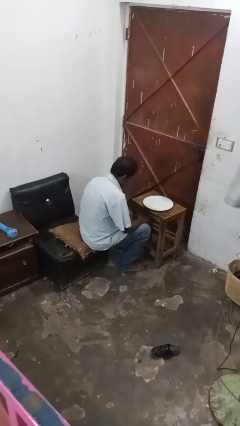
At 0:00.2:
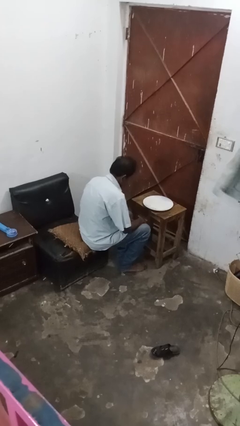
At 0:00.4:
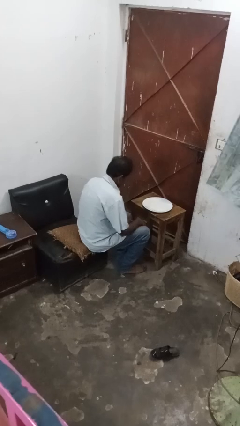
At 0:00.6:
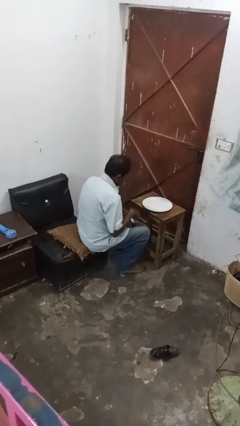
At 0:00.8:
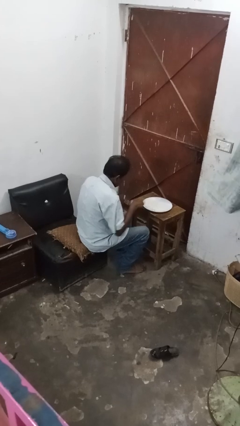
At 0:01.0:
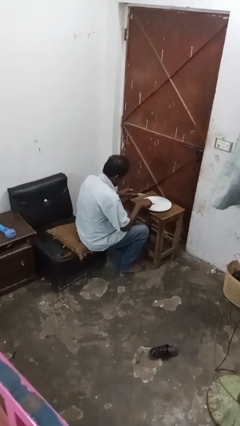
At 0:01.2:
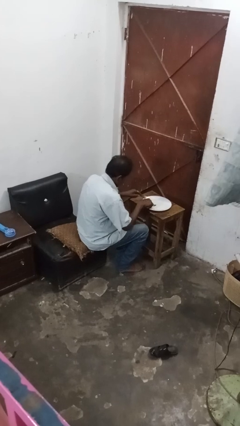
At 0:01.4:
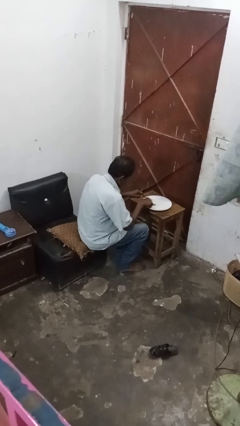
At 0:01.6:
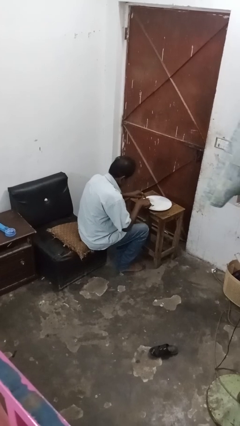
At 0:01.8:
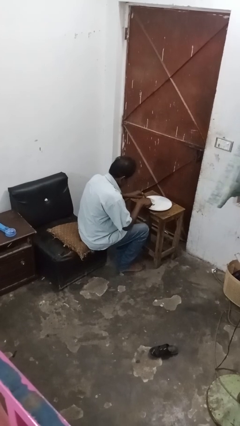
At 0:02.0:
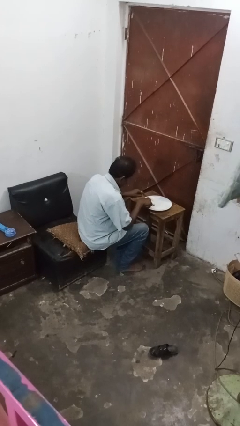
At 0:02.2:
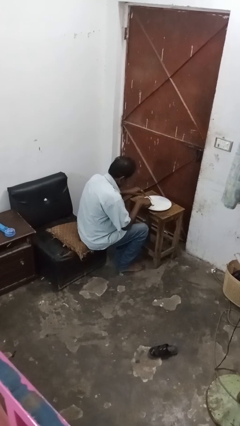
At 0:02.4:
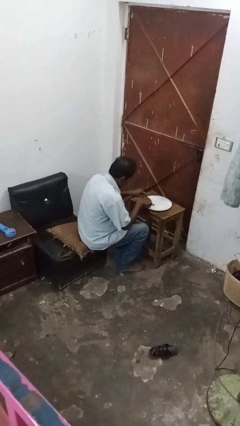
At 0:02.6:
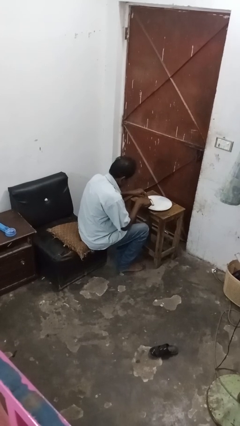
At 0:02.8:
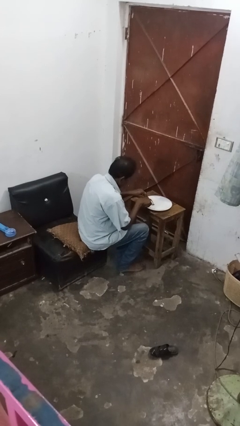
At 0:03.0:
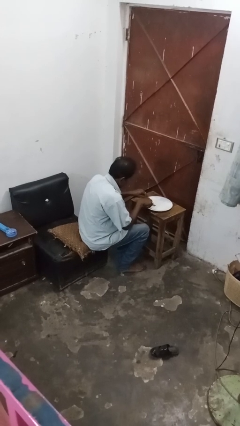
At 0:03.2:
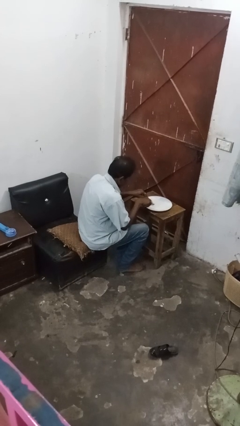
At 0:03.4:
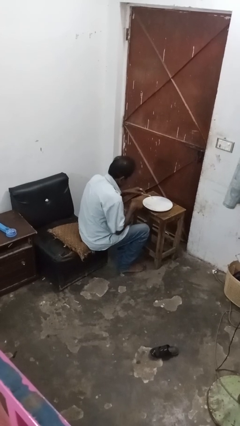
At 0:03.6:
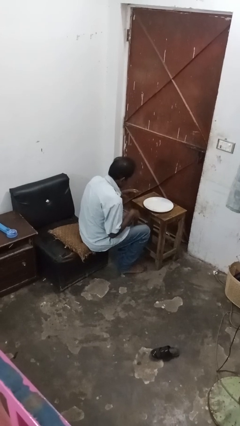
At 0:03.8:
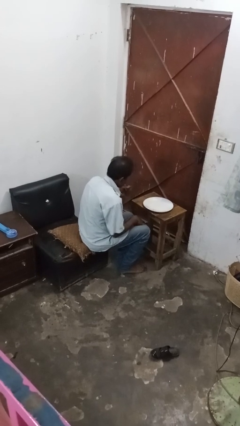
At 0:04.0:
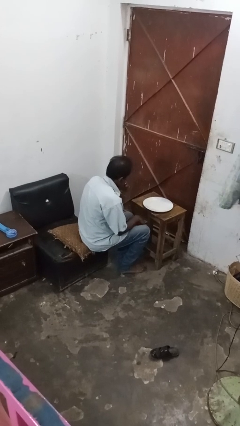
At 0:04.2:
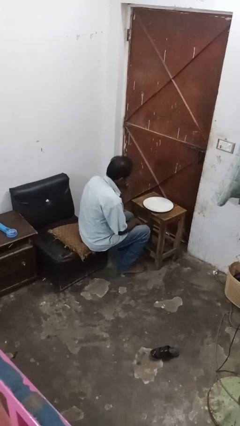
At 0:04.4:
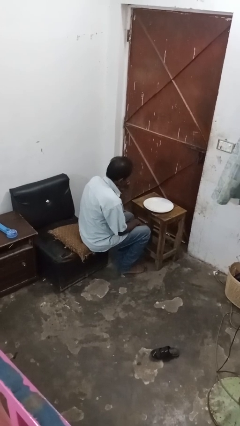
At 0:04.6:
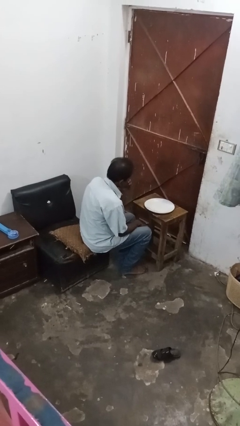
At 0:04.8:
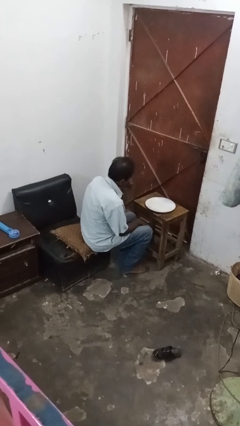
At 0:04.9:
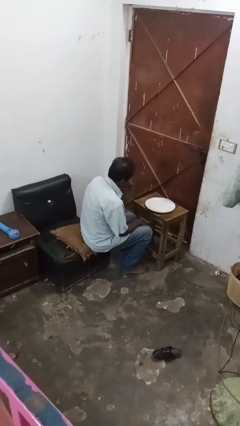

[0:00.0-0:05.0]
person eats with utensil

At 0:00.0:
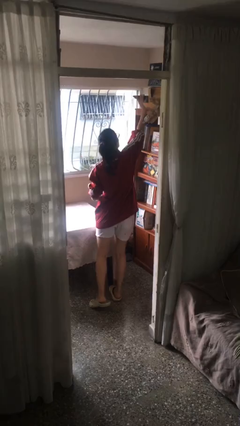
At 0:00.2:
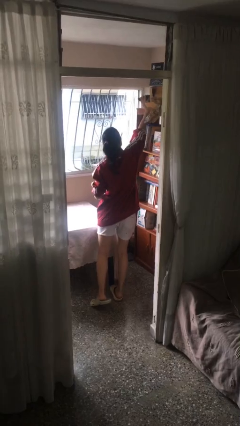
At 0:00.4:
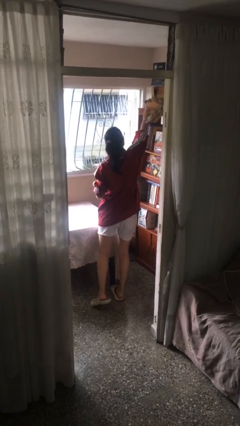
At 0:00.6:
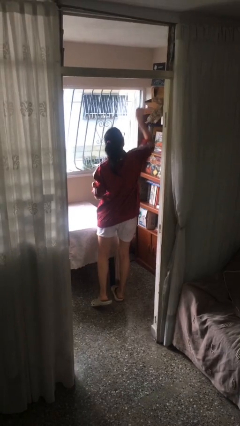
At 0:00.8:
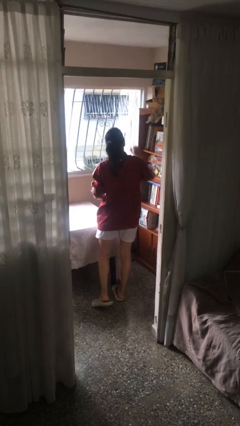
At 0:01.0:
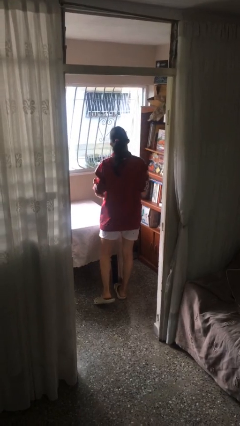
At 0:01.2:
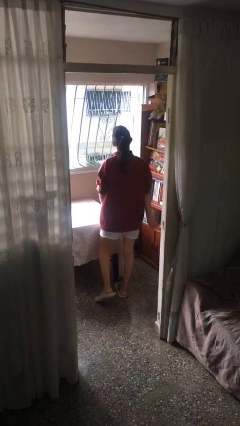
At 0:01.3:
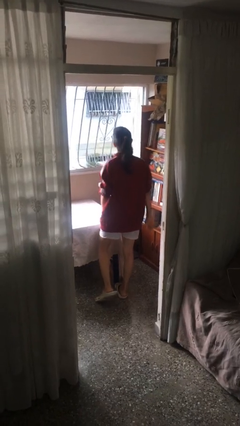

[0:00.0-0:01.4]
person puts down object on shelf

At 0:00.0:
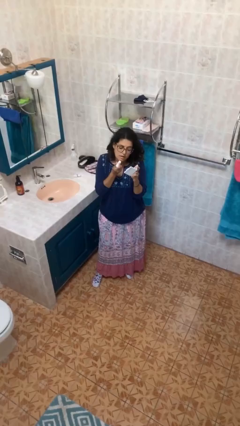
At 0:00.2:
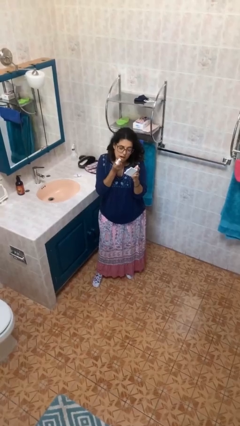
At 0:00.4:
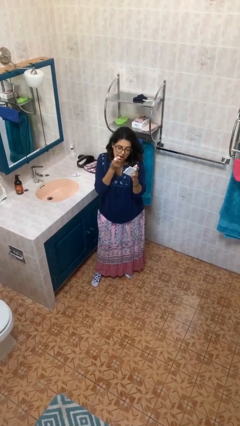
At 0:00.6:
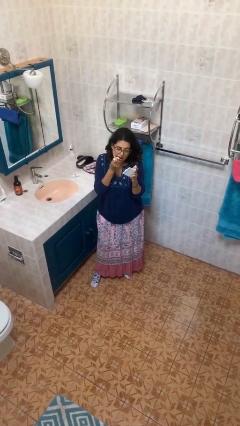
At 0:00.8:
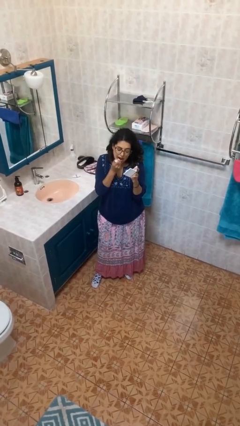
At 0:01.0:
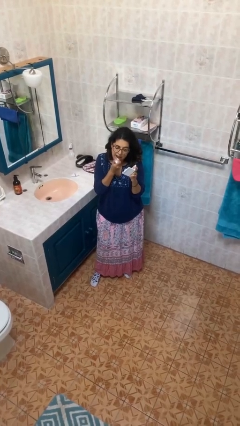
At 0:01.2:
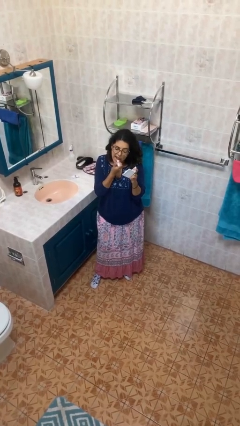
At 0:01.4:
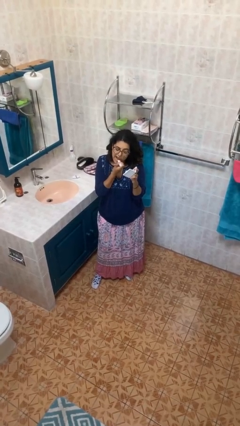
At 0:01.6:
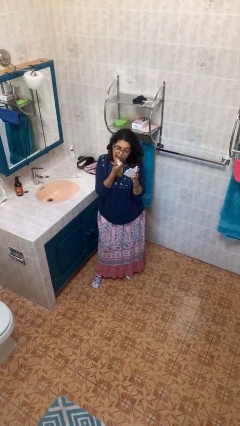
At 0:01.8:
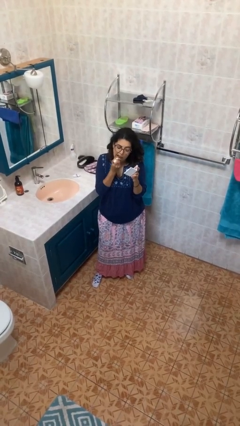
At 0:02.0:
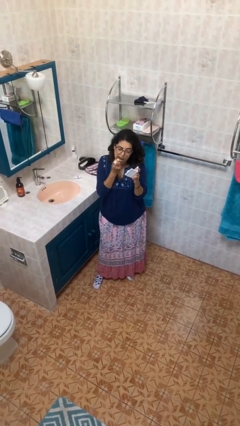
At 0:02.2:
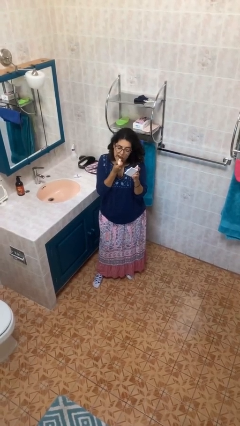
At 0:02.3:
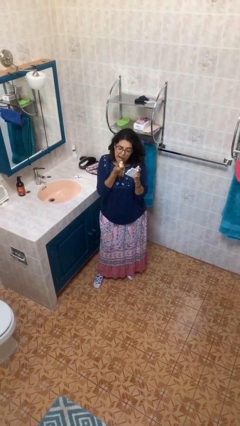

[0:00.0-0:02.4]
person applies lip makeup

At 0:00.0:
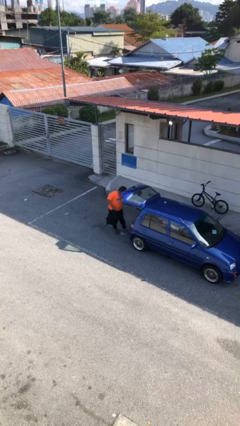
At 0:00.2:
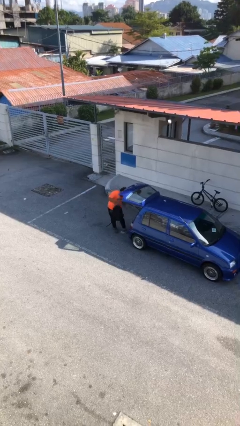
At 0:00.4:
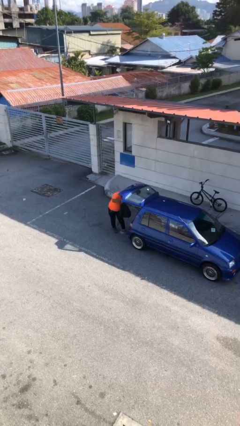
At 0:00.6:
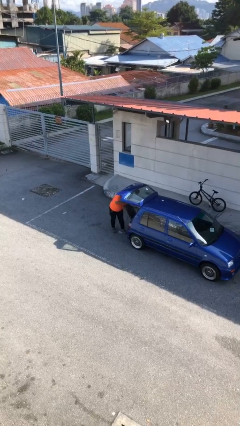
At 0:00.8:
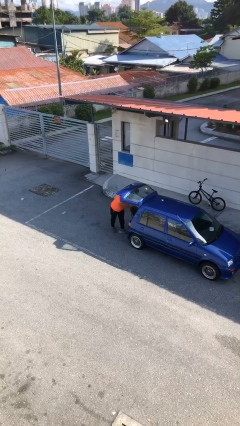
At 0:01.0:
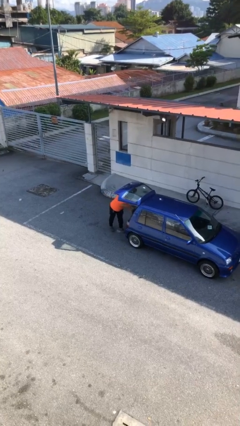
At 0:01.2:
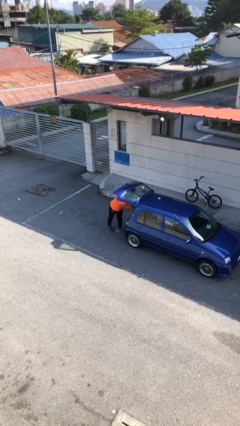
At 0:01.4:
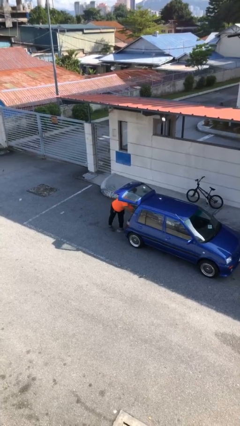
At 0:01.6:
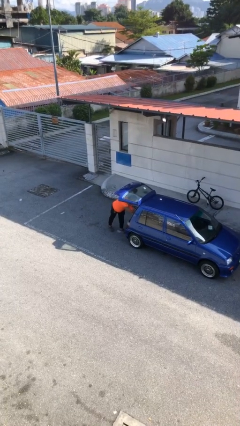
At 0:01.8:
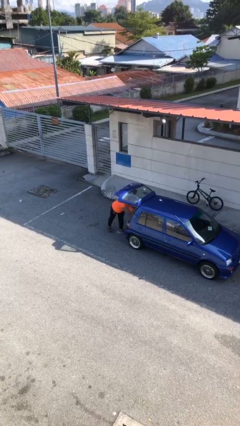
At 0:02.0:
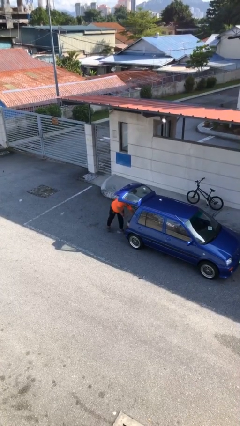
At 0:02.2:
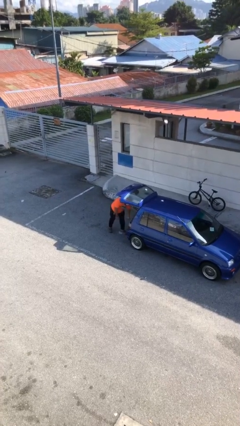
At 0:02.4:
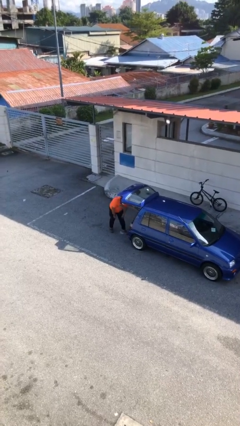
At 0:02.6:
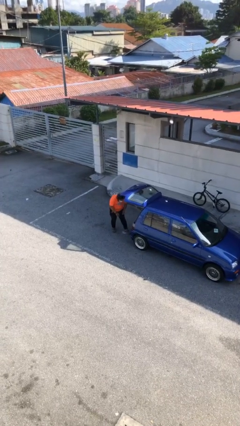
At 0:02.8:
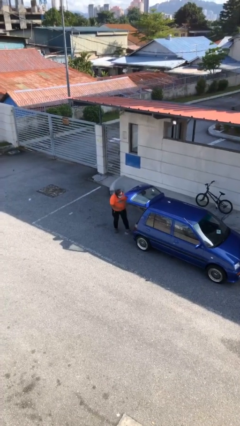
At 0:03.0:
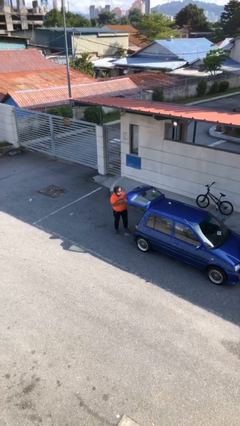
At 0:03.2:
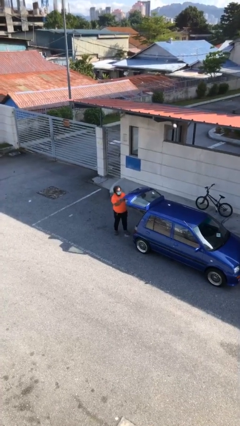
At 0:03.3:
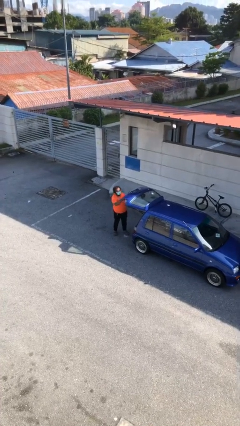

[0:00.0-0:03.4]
person loads car

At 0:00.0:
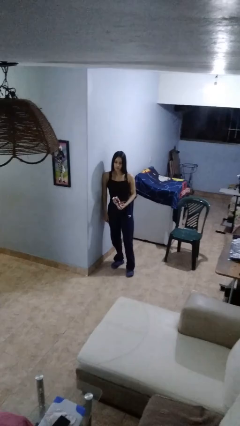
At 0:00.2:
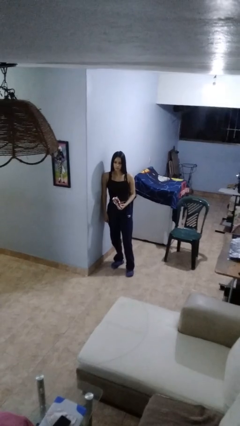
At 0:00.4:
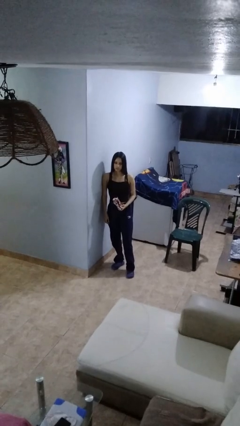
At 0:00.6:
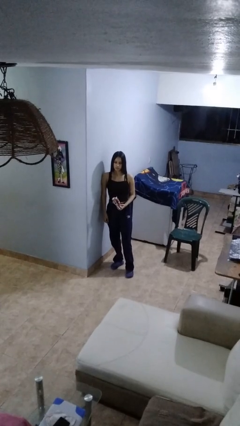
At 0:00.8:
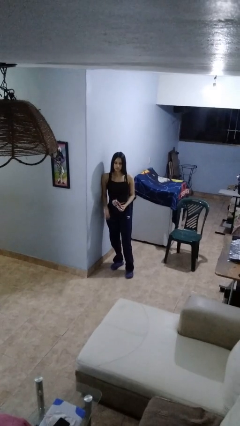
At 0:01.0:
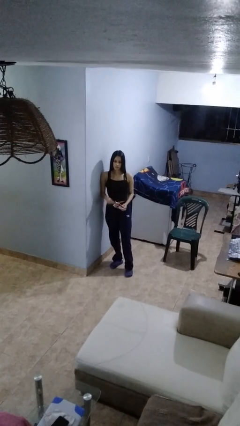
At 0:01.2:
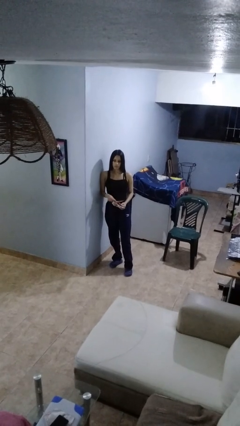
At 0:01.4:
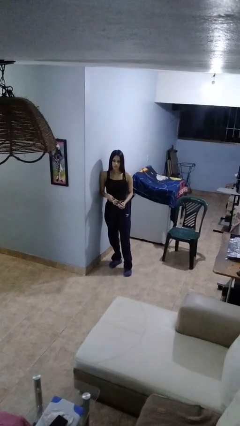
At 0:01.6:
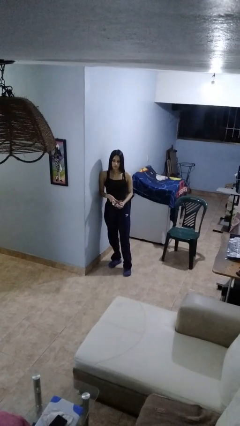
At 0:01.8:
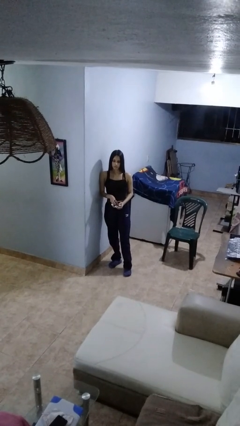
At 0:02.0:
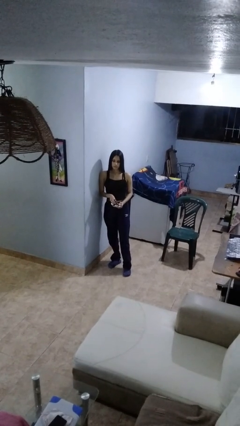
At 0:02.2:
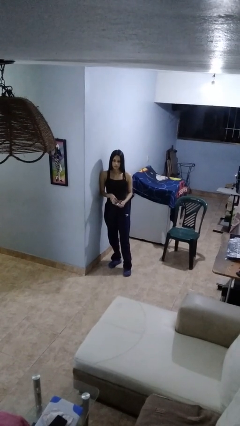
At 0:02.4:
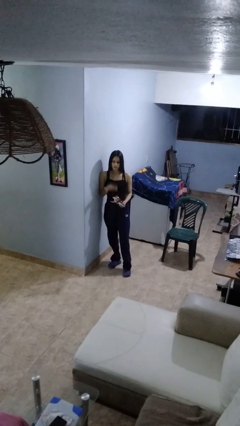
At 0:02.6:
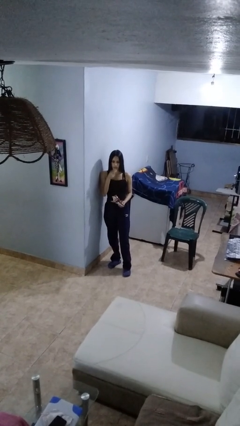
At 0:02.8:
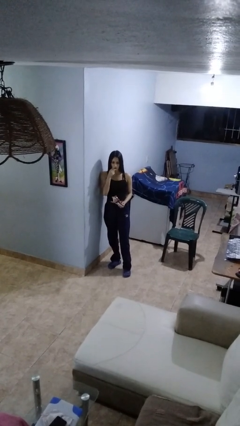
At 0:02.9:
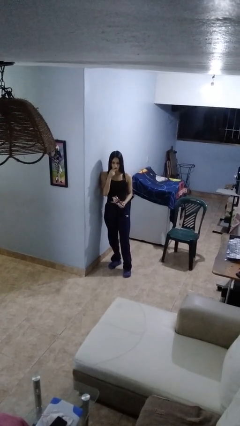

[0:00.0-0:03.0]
person eats snack from bag

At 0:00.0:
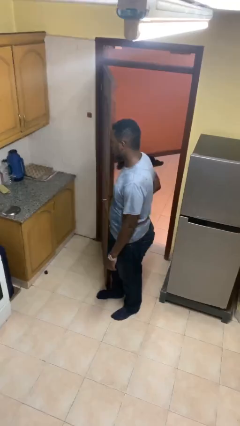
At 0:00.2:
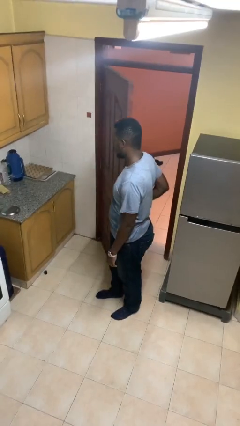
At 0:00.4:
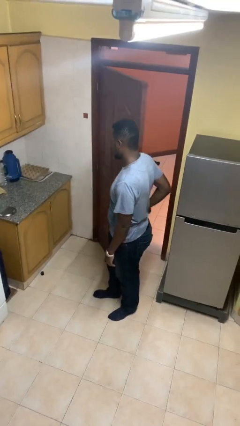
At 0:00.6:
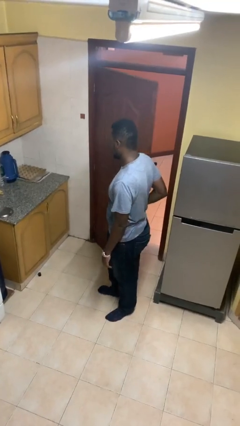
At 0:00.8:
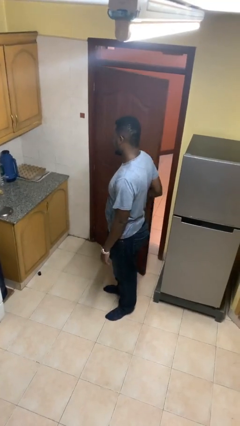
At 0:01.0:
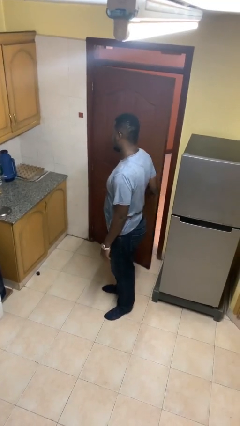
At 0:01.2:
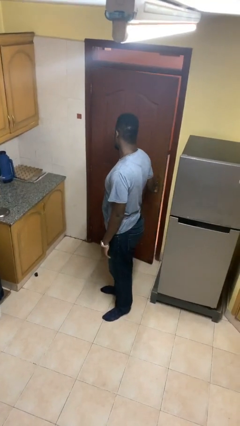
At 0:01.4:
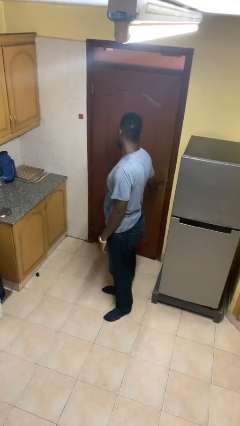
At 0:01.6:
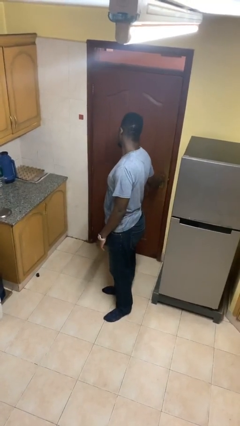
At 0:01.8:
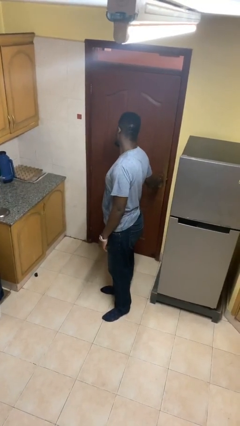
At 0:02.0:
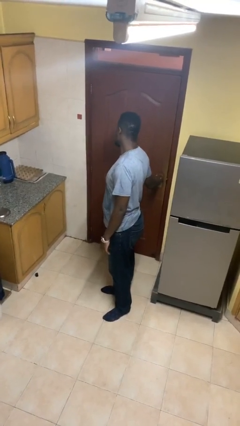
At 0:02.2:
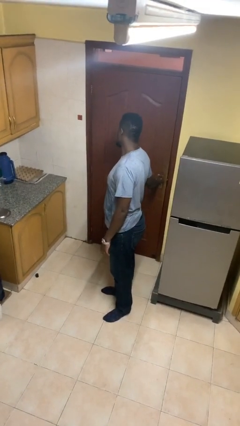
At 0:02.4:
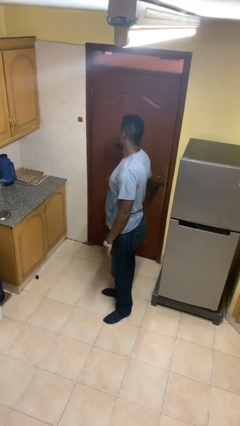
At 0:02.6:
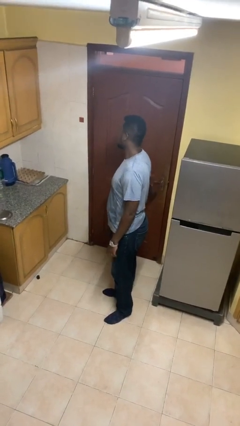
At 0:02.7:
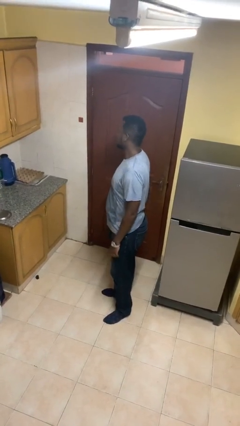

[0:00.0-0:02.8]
person closes facility door
